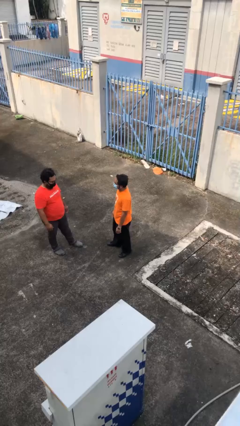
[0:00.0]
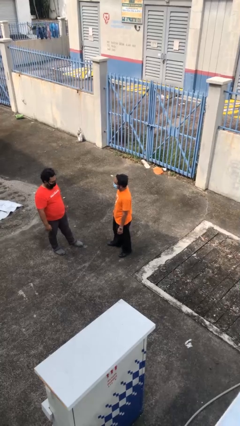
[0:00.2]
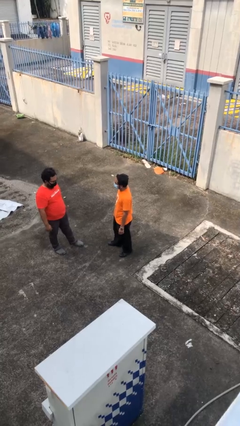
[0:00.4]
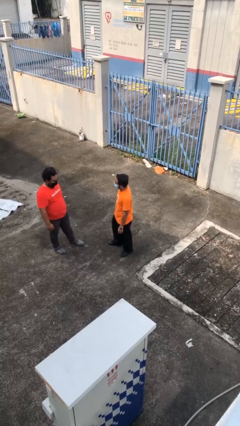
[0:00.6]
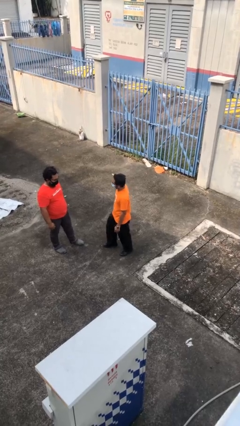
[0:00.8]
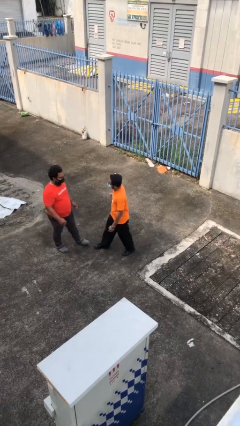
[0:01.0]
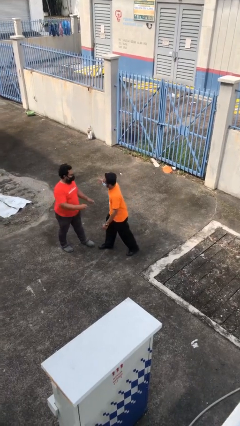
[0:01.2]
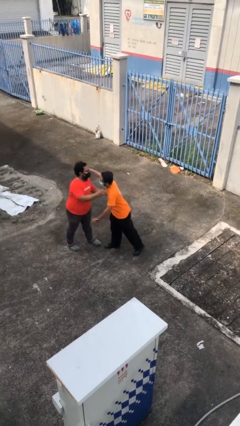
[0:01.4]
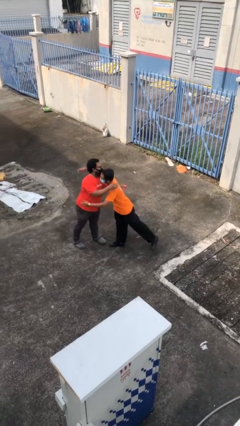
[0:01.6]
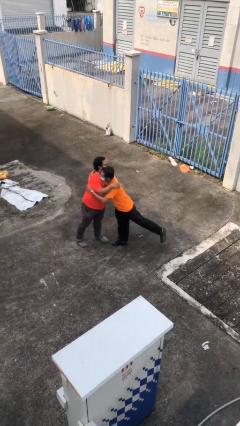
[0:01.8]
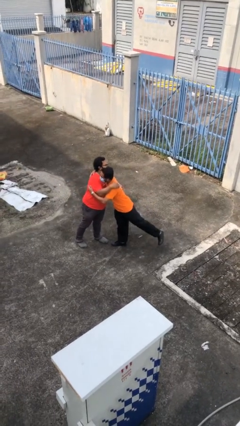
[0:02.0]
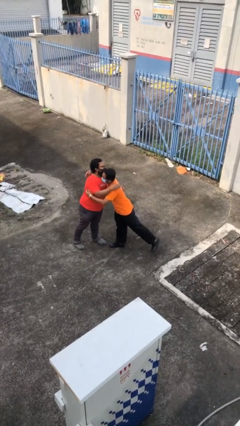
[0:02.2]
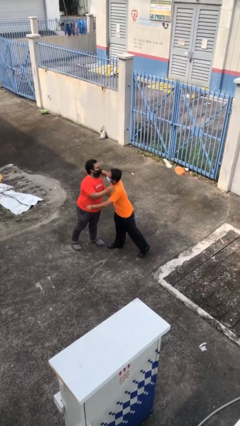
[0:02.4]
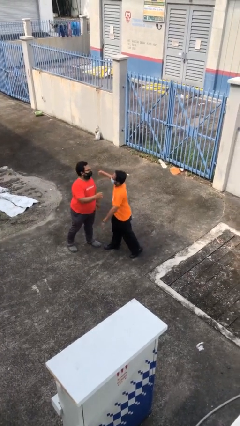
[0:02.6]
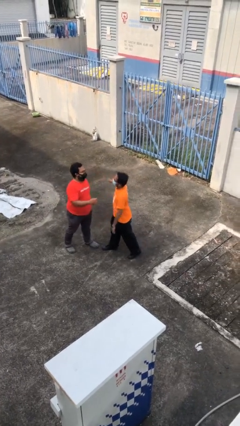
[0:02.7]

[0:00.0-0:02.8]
person embraces person

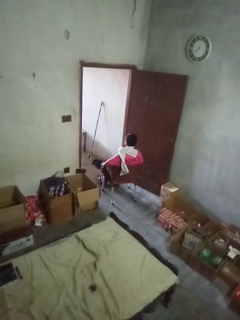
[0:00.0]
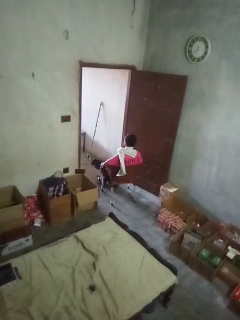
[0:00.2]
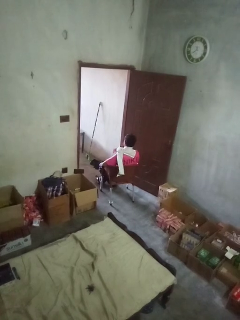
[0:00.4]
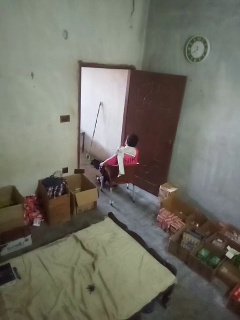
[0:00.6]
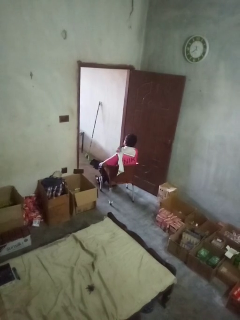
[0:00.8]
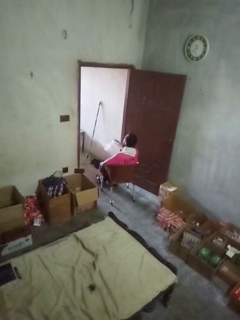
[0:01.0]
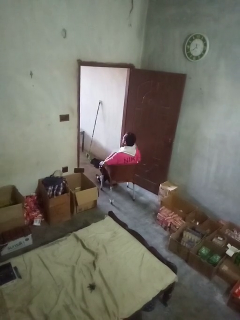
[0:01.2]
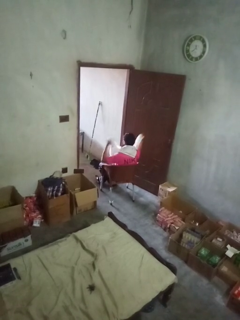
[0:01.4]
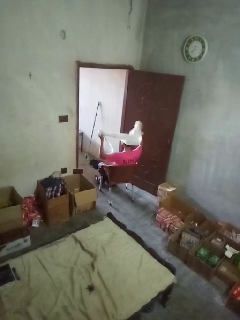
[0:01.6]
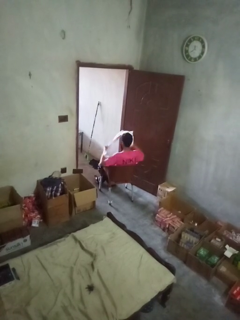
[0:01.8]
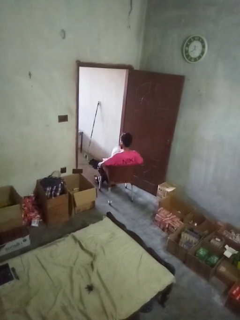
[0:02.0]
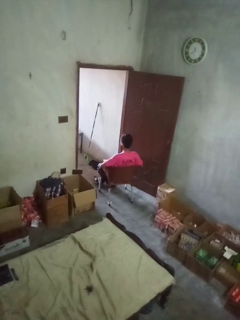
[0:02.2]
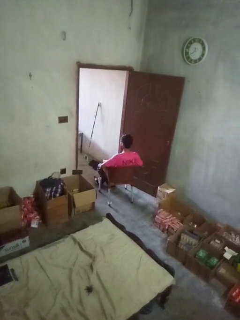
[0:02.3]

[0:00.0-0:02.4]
person takes off scarf

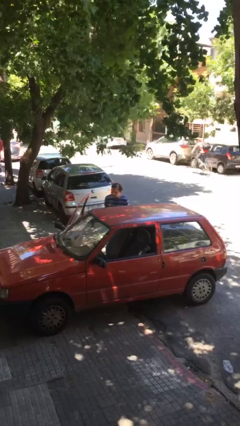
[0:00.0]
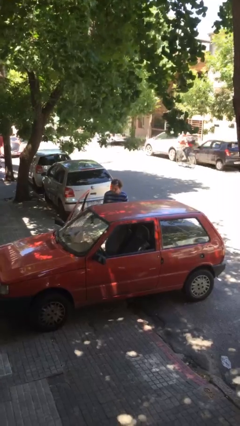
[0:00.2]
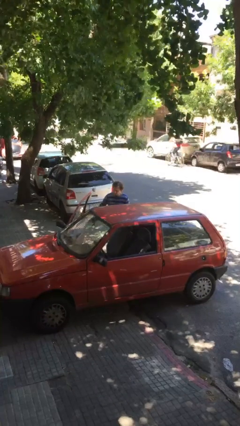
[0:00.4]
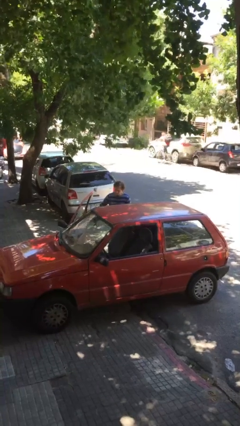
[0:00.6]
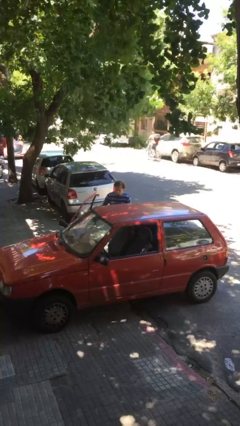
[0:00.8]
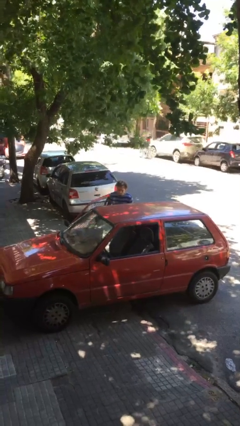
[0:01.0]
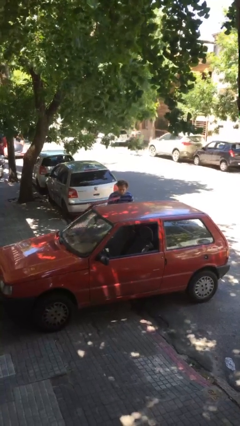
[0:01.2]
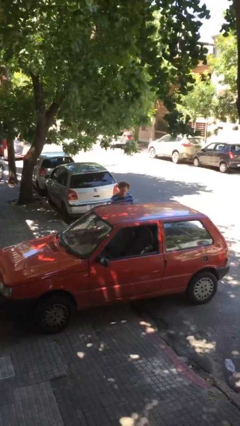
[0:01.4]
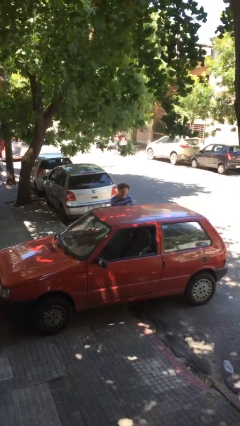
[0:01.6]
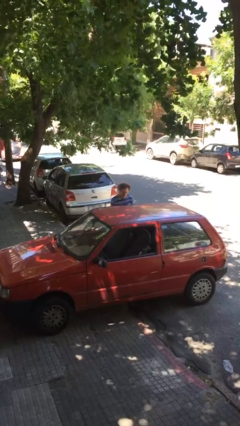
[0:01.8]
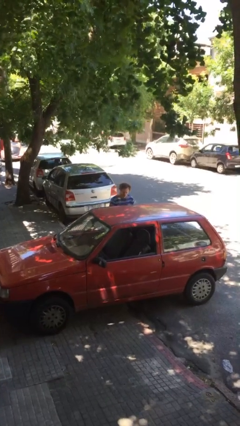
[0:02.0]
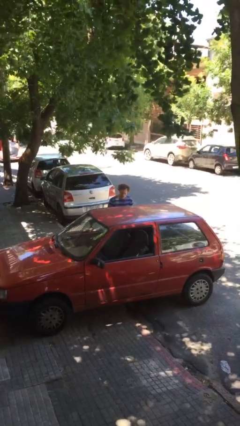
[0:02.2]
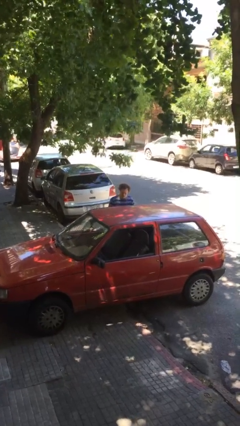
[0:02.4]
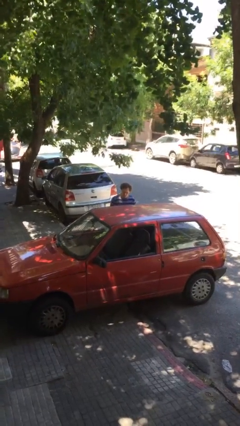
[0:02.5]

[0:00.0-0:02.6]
person closes car door

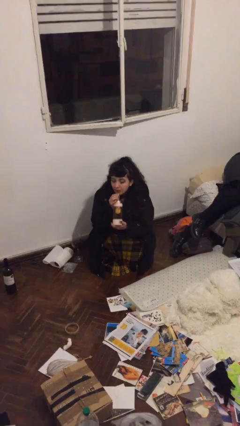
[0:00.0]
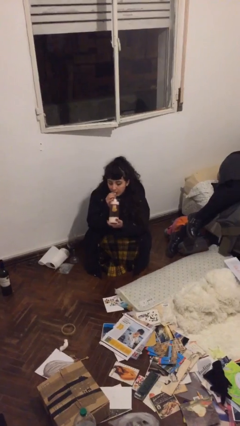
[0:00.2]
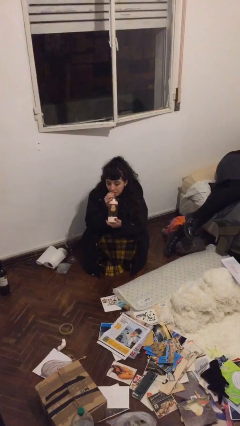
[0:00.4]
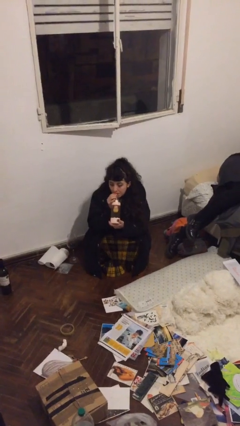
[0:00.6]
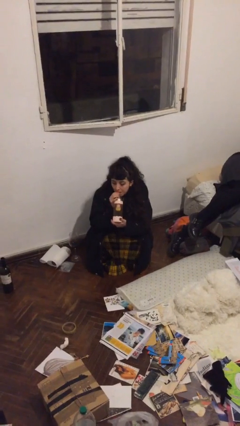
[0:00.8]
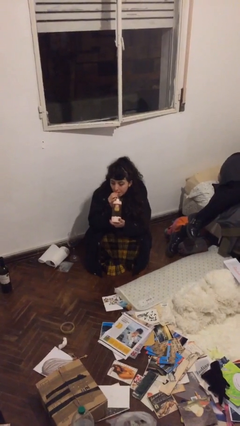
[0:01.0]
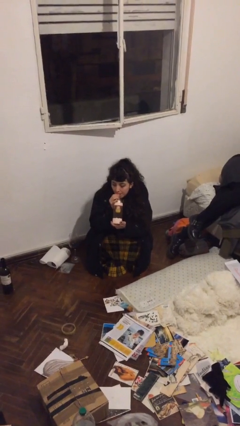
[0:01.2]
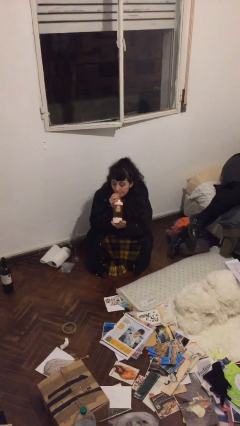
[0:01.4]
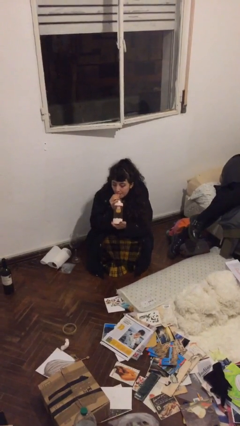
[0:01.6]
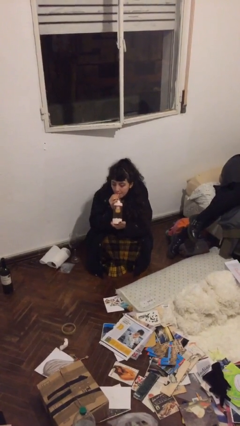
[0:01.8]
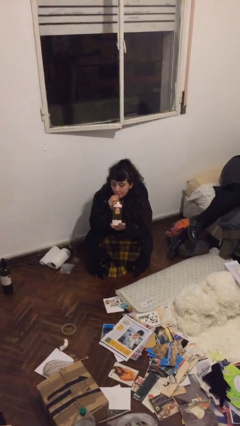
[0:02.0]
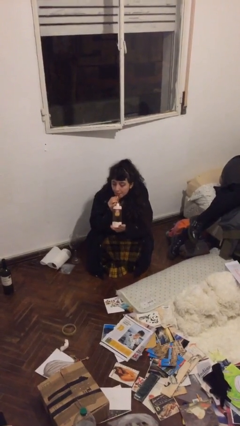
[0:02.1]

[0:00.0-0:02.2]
person drinks from straw

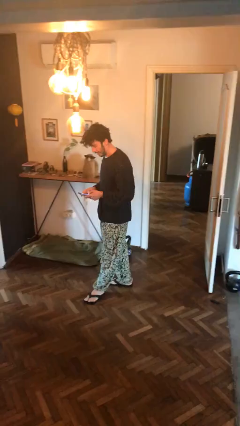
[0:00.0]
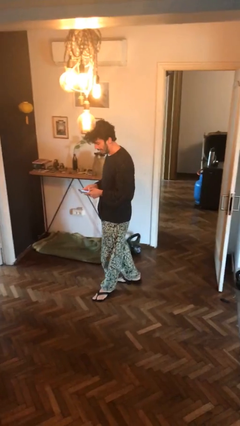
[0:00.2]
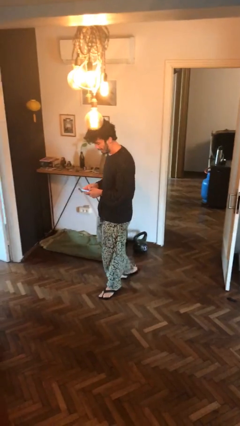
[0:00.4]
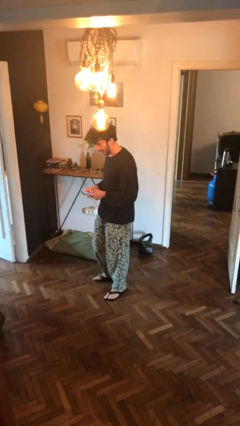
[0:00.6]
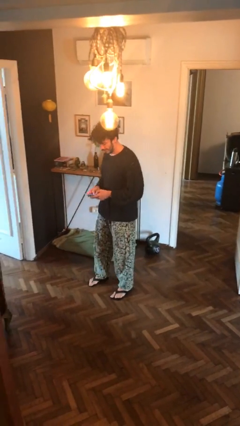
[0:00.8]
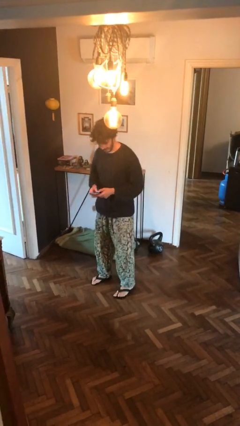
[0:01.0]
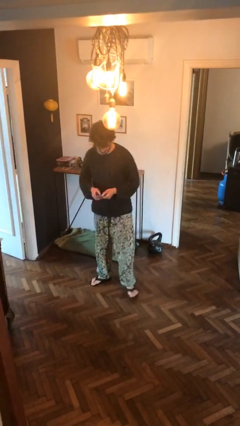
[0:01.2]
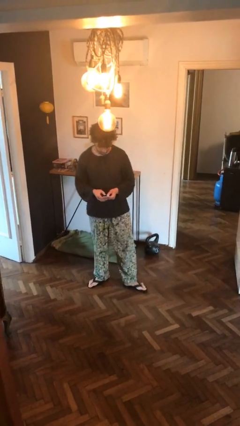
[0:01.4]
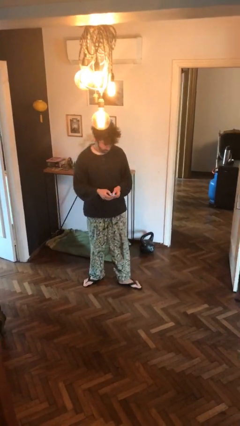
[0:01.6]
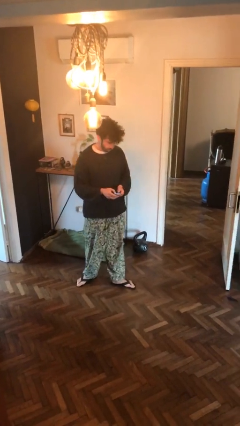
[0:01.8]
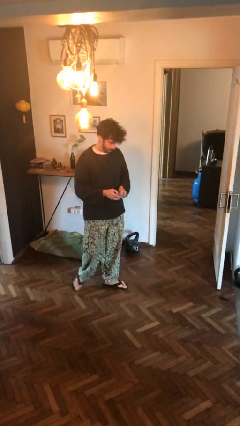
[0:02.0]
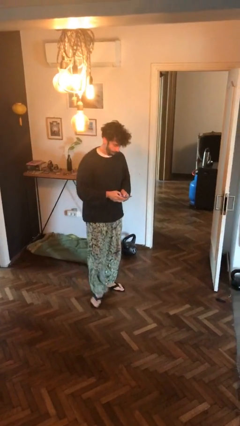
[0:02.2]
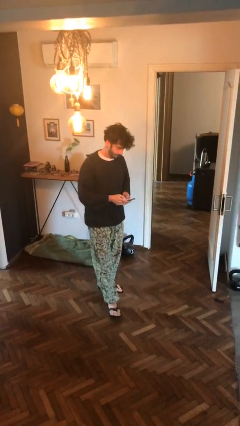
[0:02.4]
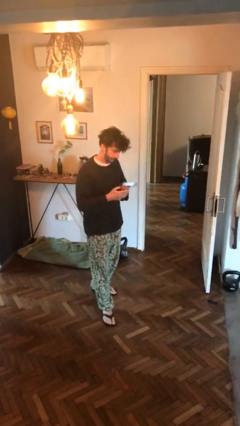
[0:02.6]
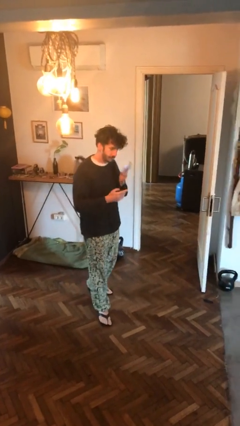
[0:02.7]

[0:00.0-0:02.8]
person texts on phone

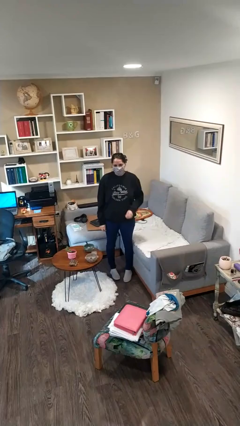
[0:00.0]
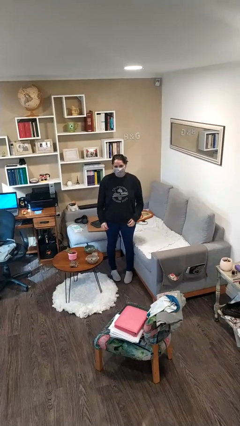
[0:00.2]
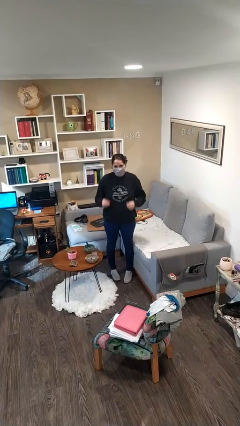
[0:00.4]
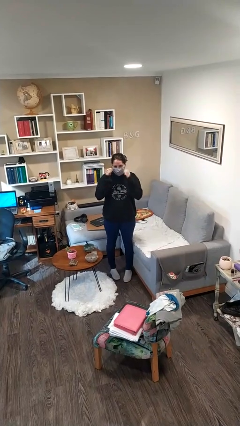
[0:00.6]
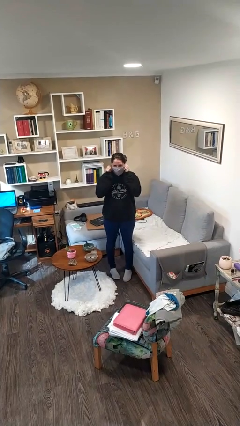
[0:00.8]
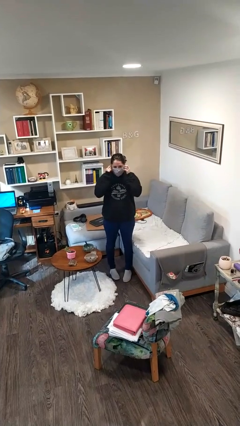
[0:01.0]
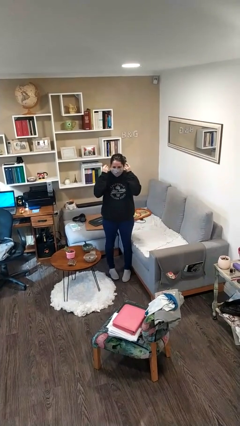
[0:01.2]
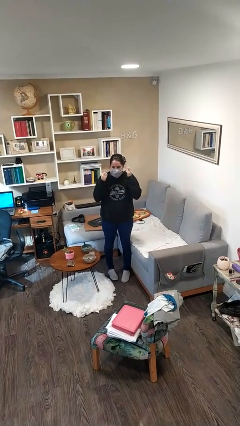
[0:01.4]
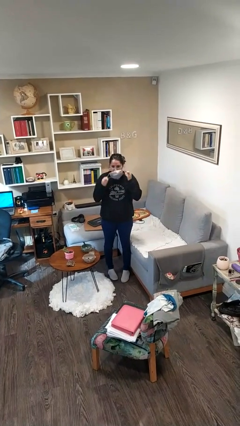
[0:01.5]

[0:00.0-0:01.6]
person takes off facemask

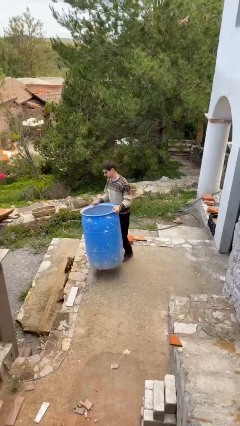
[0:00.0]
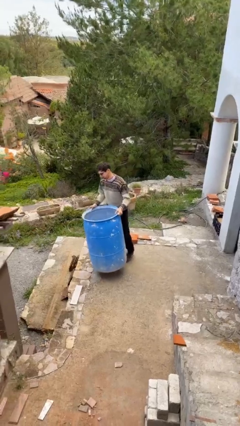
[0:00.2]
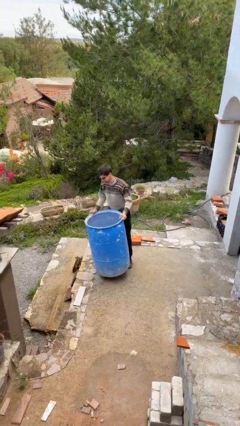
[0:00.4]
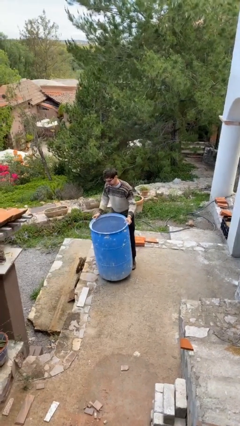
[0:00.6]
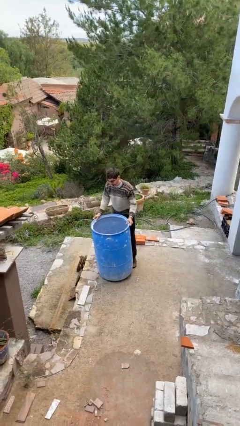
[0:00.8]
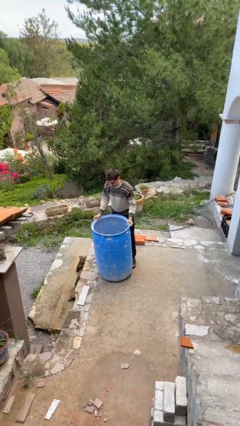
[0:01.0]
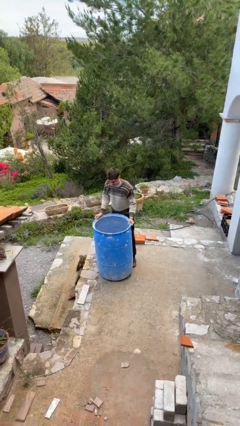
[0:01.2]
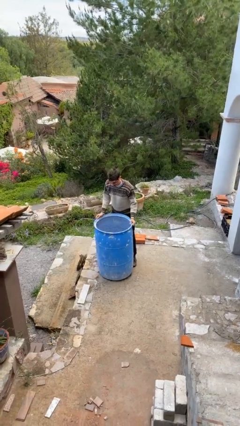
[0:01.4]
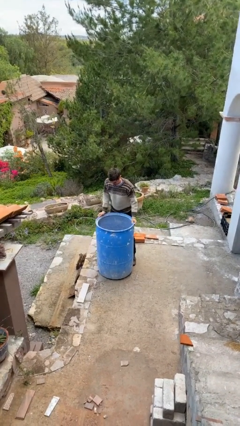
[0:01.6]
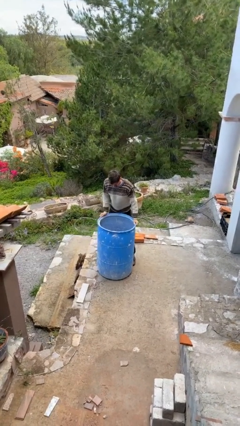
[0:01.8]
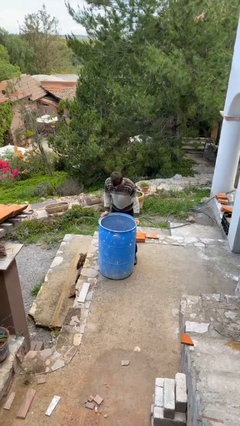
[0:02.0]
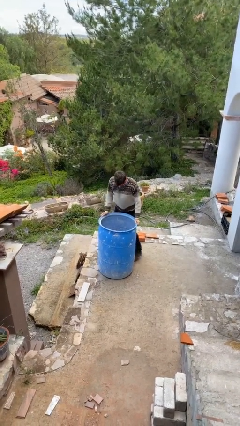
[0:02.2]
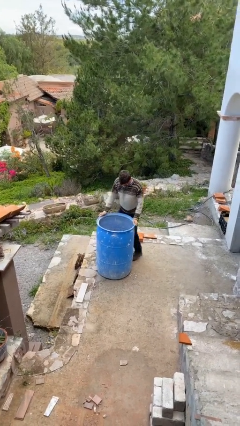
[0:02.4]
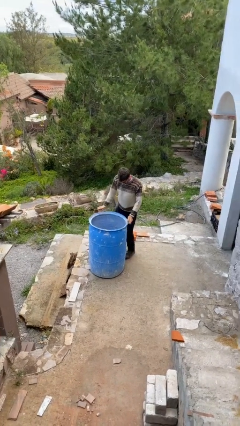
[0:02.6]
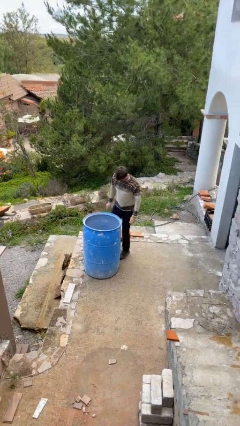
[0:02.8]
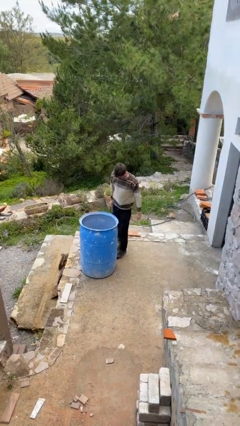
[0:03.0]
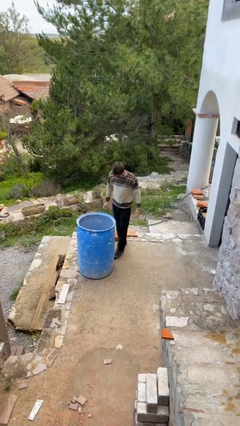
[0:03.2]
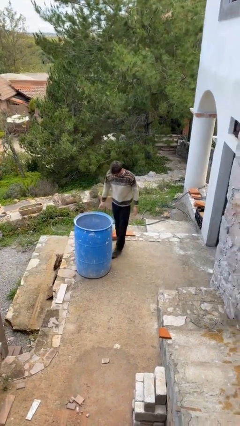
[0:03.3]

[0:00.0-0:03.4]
person puts down object on floor
